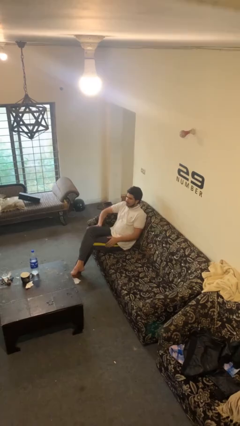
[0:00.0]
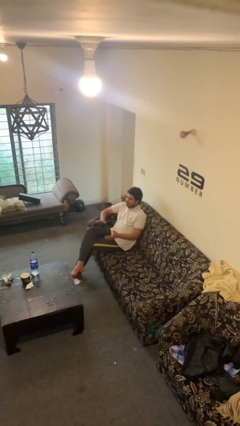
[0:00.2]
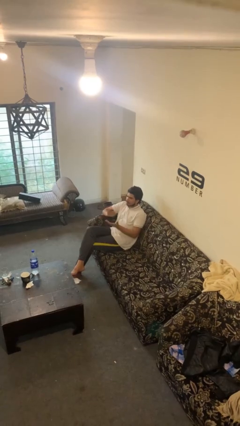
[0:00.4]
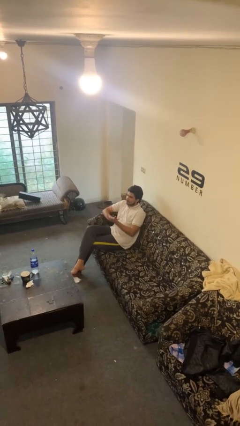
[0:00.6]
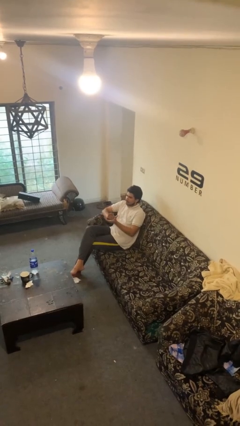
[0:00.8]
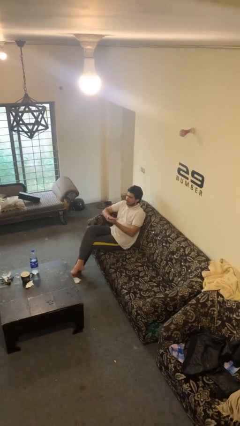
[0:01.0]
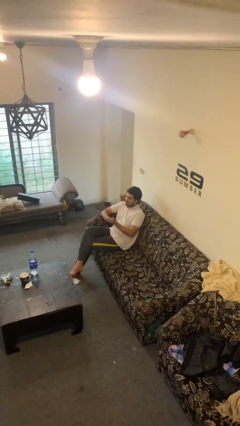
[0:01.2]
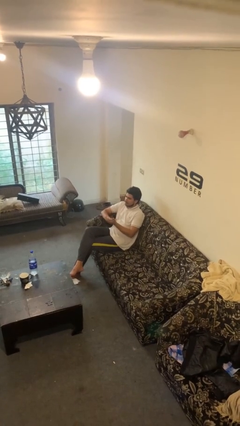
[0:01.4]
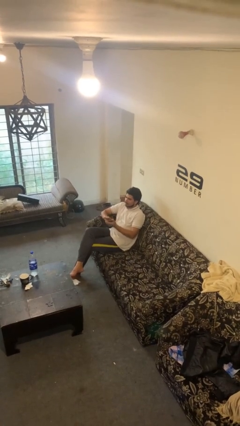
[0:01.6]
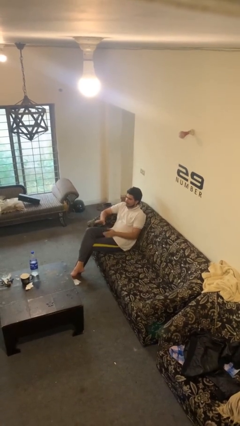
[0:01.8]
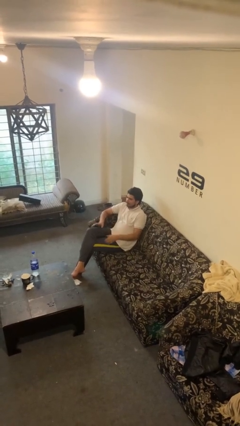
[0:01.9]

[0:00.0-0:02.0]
person claps hands

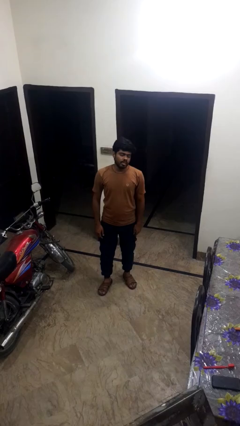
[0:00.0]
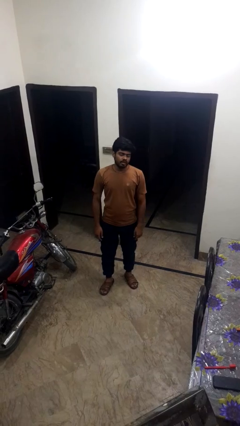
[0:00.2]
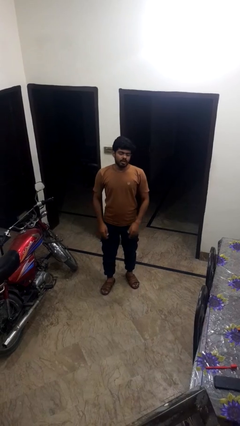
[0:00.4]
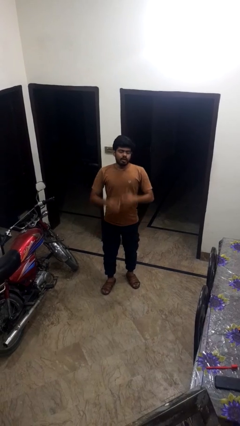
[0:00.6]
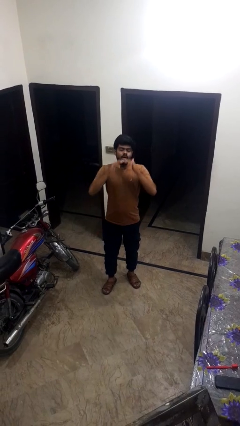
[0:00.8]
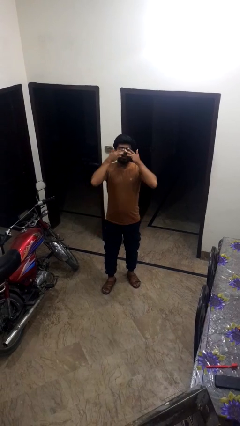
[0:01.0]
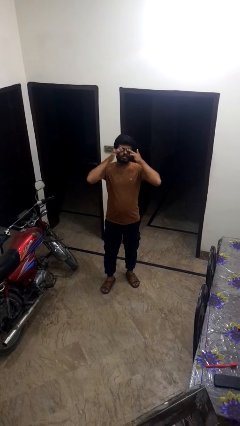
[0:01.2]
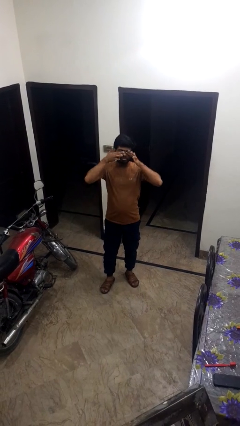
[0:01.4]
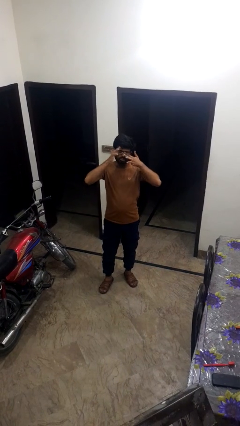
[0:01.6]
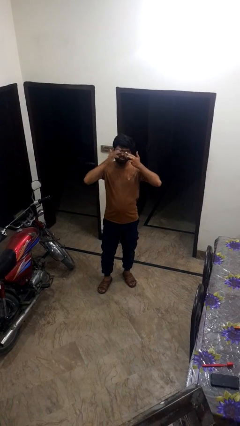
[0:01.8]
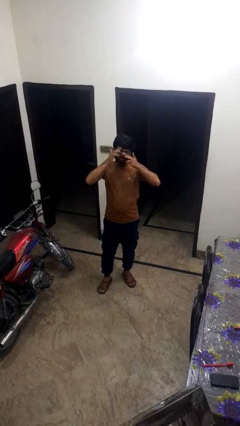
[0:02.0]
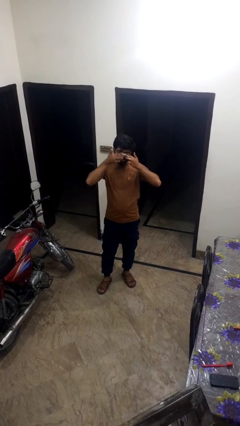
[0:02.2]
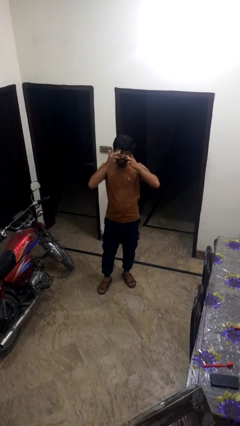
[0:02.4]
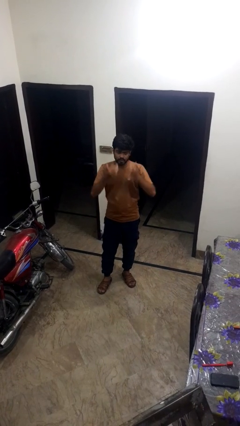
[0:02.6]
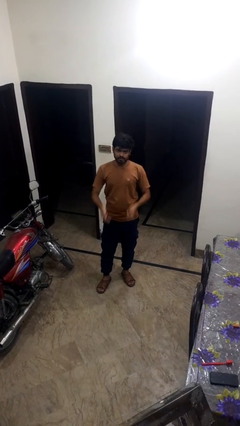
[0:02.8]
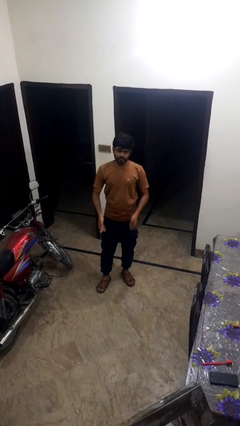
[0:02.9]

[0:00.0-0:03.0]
person rubs eyes

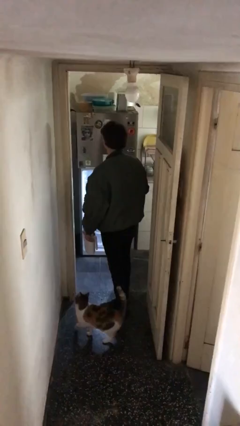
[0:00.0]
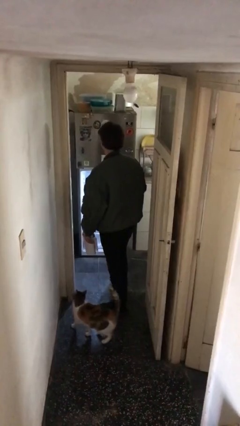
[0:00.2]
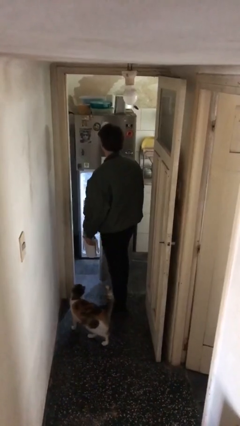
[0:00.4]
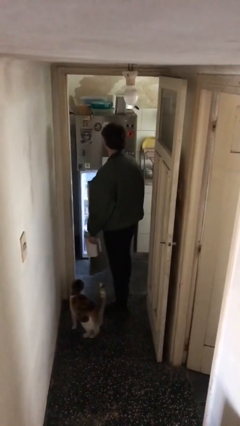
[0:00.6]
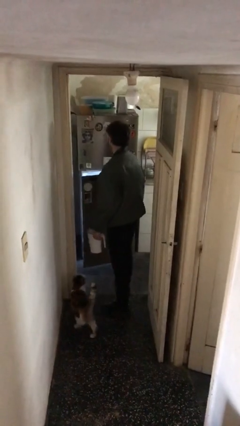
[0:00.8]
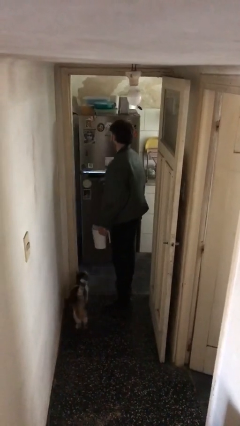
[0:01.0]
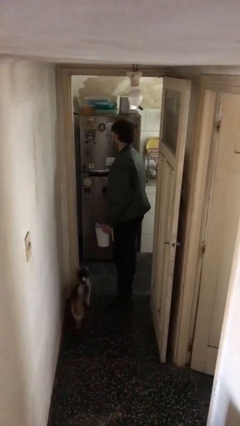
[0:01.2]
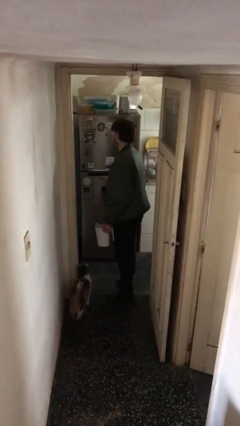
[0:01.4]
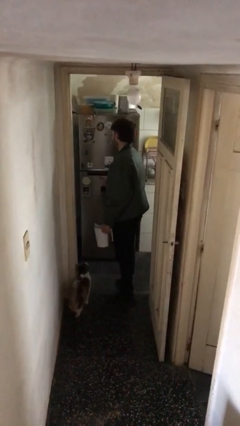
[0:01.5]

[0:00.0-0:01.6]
person closes refrigerator

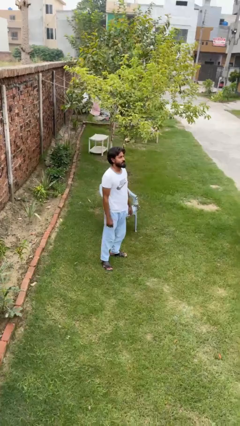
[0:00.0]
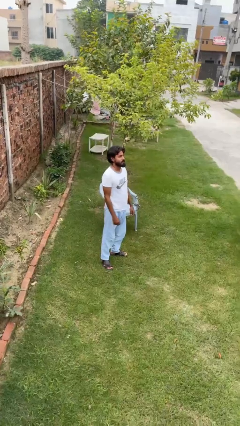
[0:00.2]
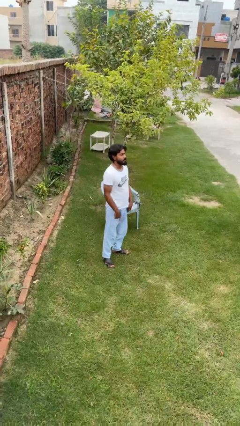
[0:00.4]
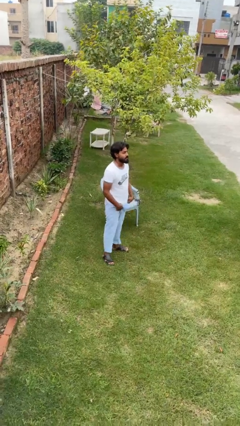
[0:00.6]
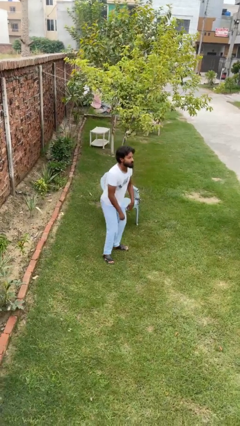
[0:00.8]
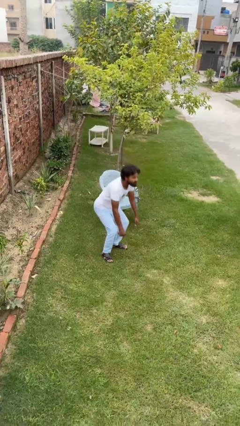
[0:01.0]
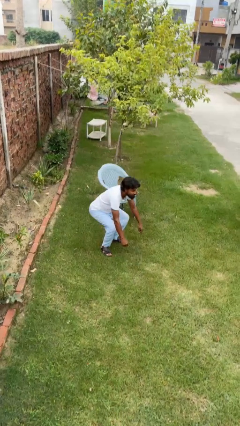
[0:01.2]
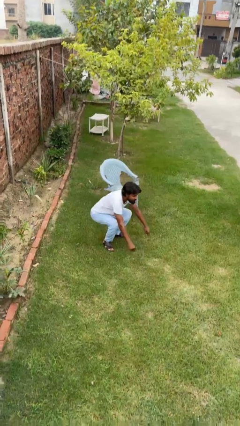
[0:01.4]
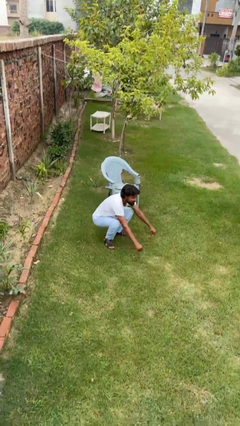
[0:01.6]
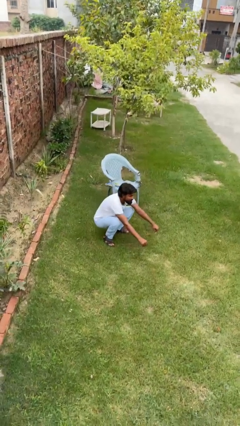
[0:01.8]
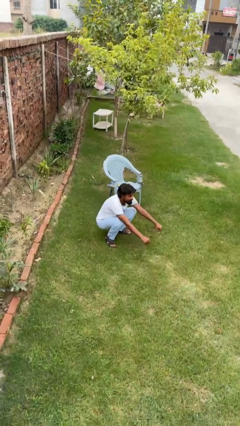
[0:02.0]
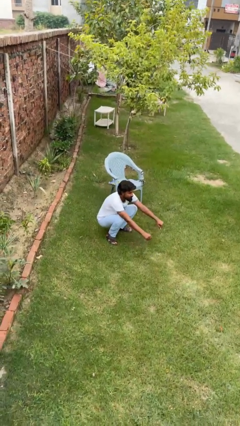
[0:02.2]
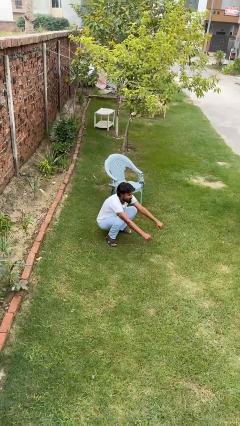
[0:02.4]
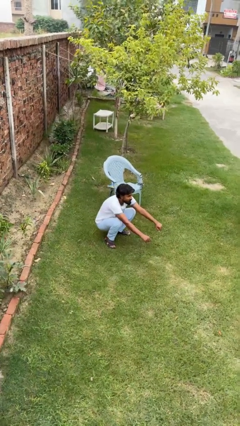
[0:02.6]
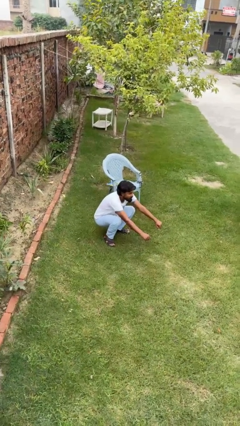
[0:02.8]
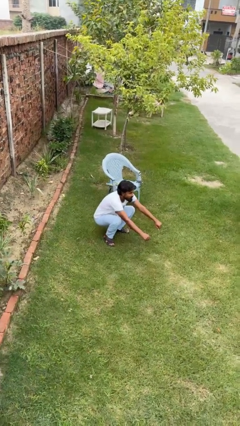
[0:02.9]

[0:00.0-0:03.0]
person squats

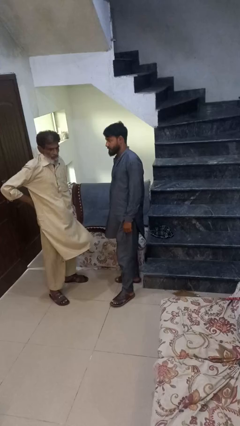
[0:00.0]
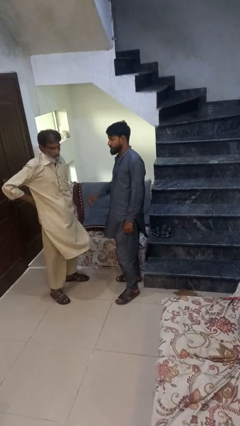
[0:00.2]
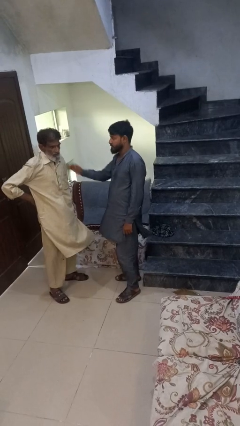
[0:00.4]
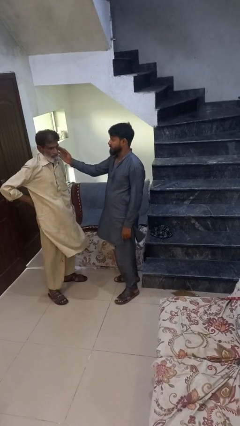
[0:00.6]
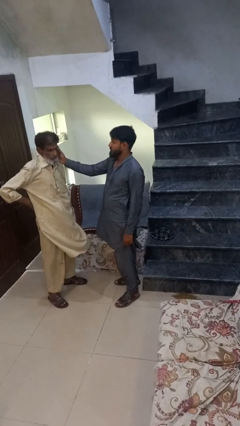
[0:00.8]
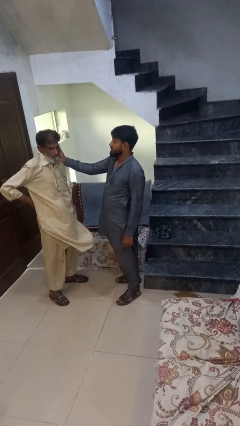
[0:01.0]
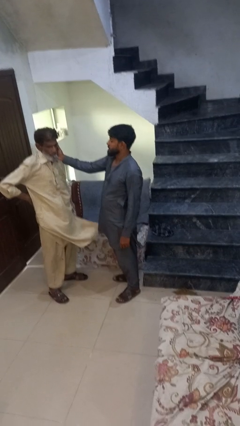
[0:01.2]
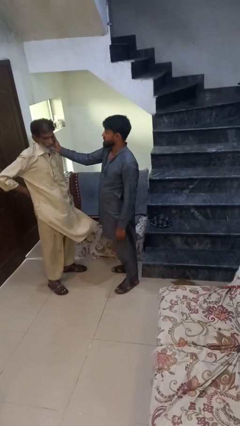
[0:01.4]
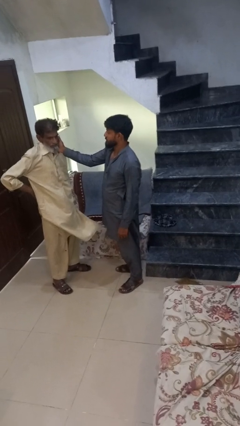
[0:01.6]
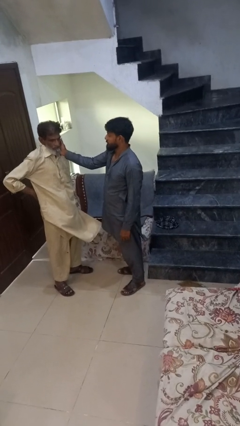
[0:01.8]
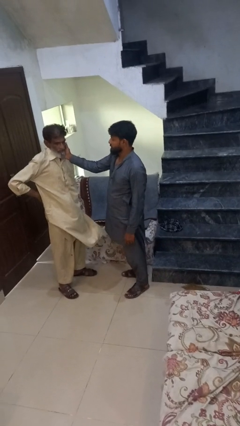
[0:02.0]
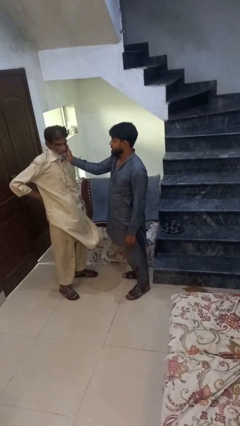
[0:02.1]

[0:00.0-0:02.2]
person touches face of person

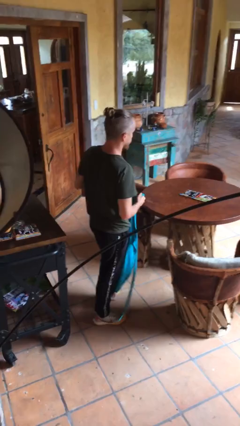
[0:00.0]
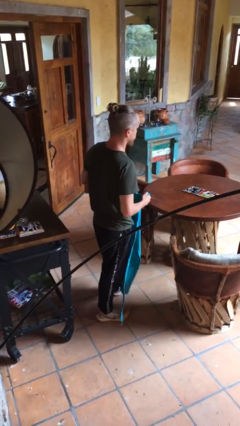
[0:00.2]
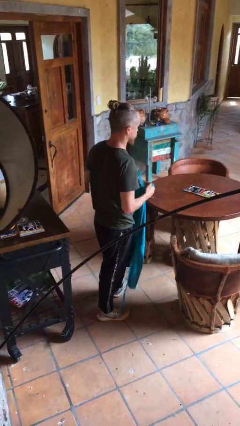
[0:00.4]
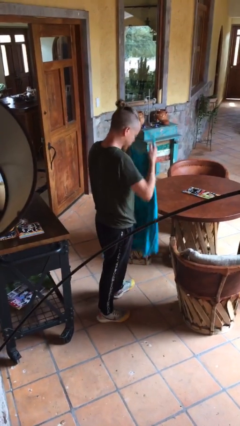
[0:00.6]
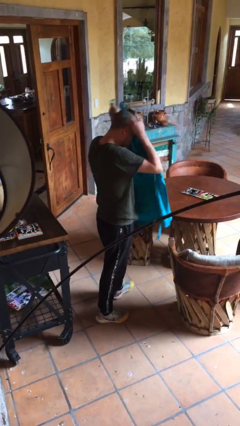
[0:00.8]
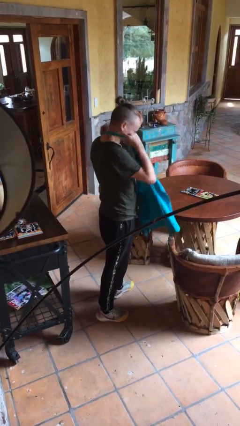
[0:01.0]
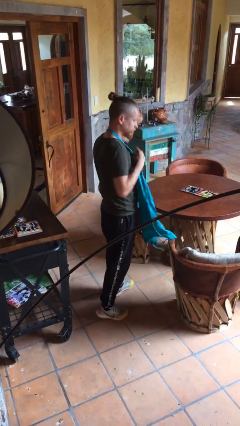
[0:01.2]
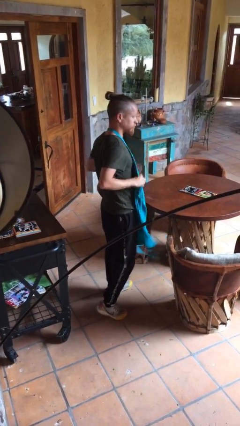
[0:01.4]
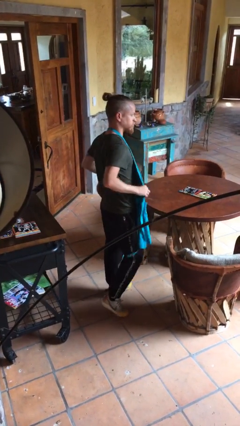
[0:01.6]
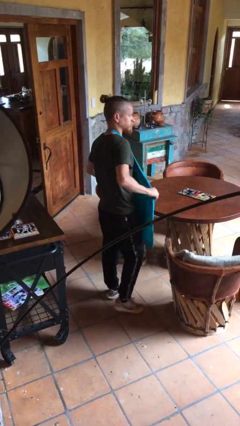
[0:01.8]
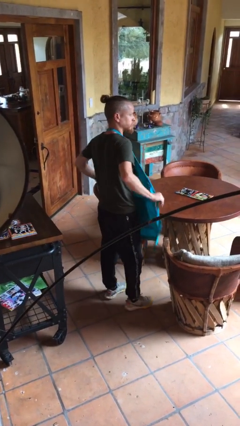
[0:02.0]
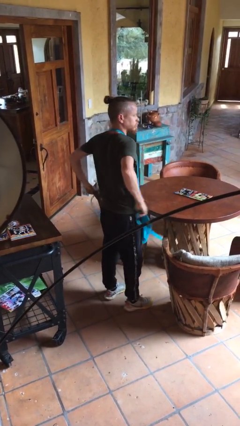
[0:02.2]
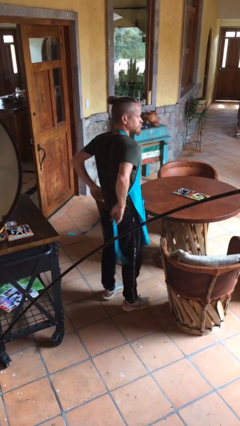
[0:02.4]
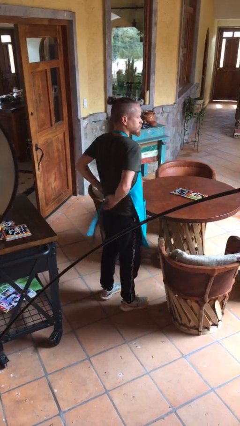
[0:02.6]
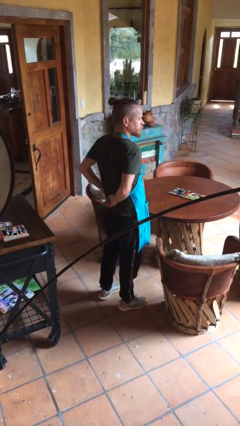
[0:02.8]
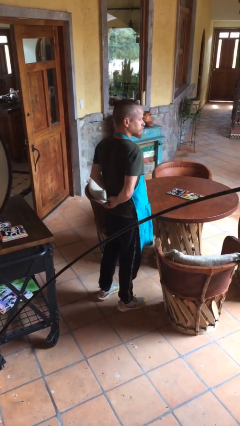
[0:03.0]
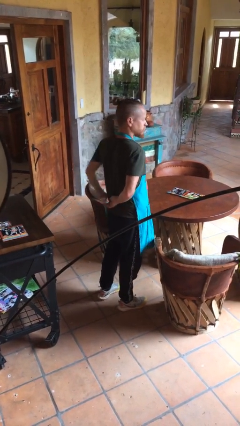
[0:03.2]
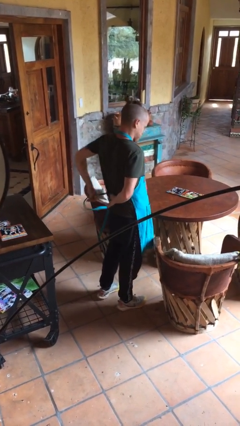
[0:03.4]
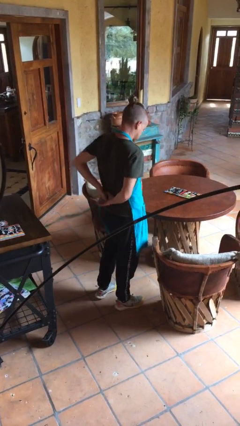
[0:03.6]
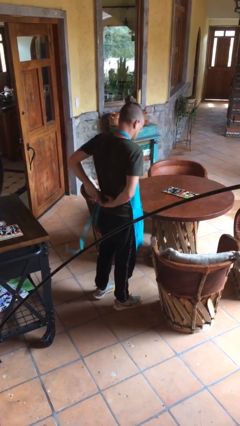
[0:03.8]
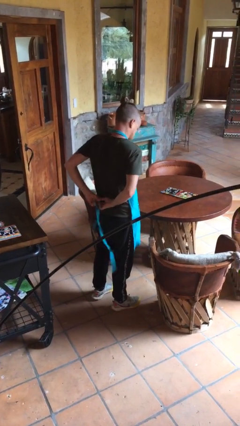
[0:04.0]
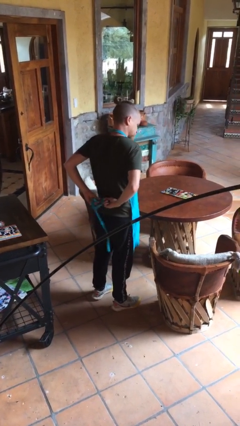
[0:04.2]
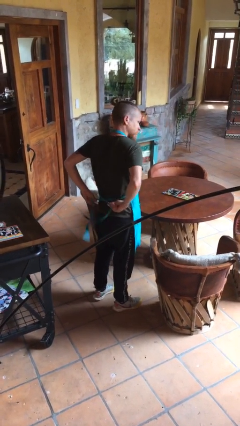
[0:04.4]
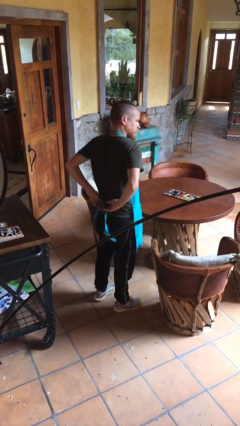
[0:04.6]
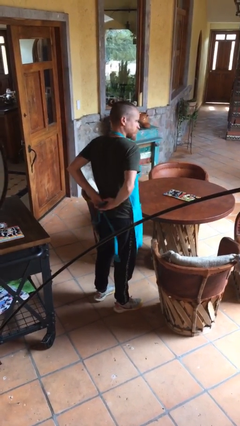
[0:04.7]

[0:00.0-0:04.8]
person puts on apron

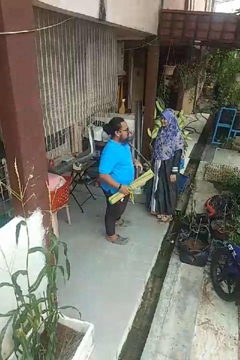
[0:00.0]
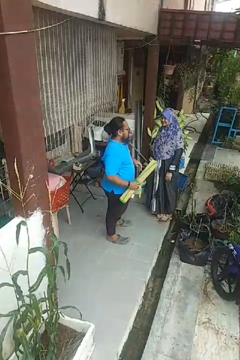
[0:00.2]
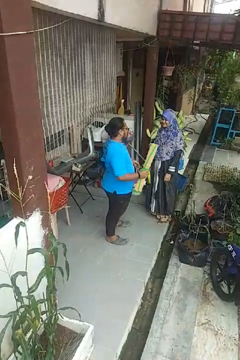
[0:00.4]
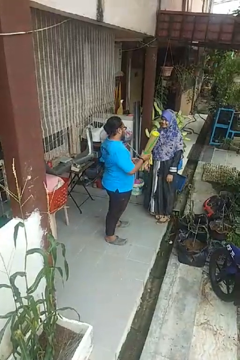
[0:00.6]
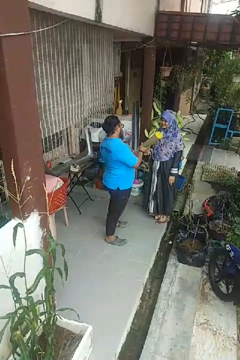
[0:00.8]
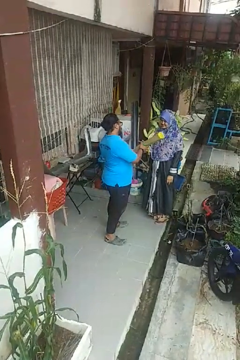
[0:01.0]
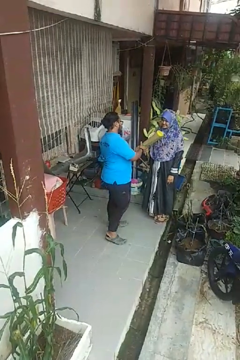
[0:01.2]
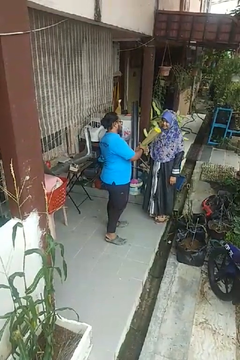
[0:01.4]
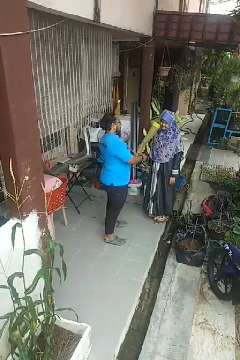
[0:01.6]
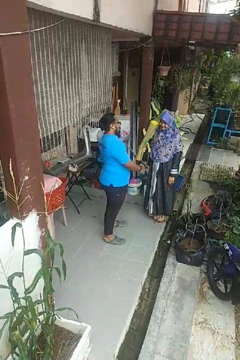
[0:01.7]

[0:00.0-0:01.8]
person transfers object to person
